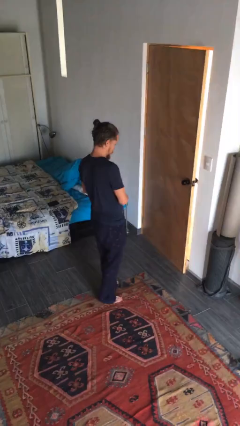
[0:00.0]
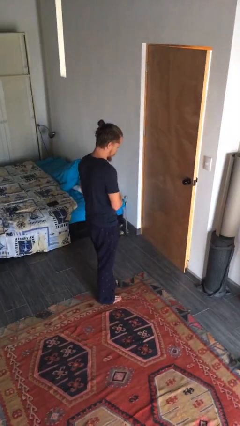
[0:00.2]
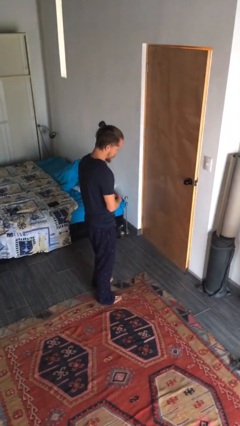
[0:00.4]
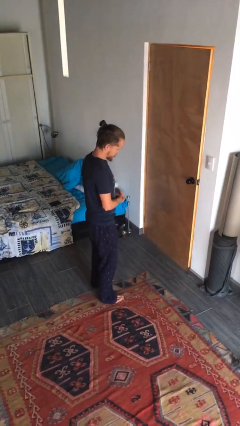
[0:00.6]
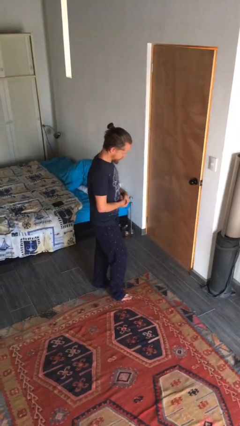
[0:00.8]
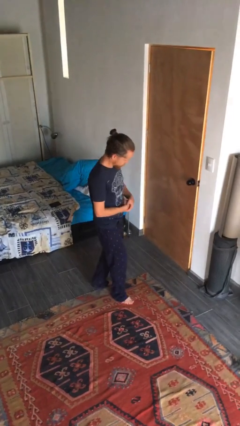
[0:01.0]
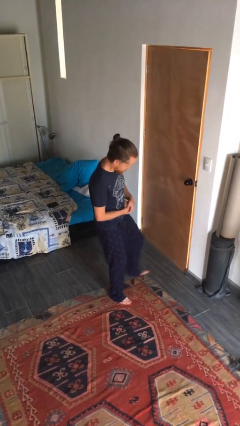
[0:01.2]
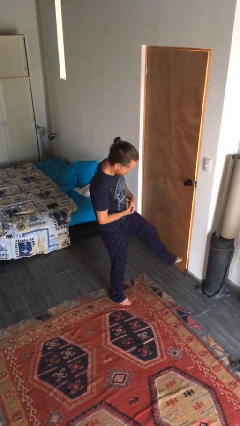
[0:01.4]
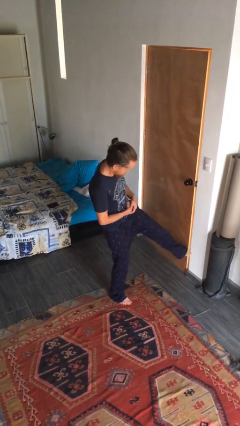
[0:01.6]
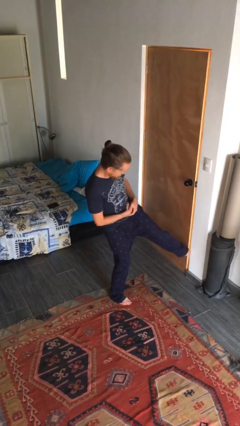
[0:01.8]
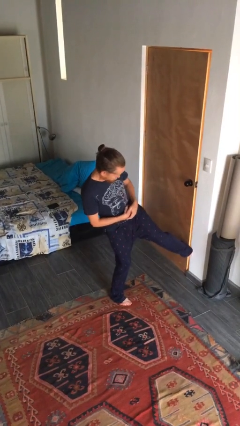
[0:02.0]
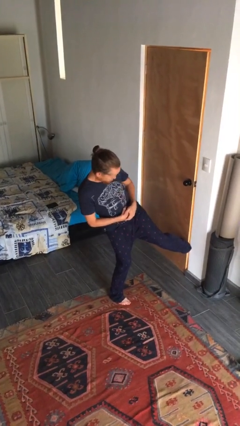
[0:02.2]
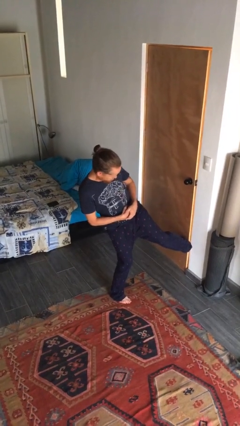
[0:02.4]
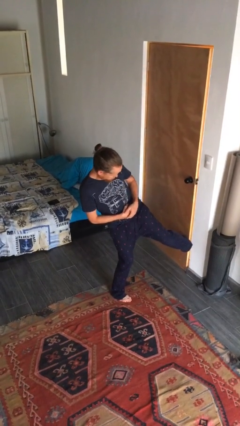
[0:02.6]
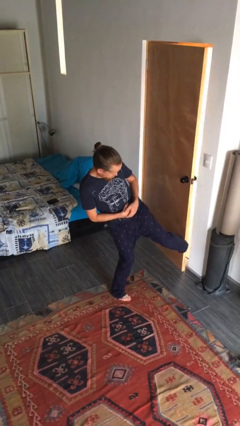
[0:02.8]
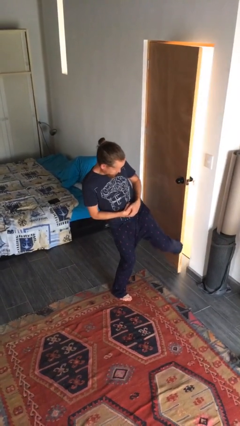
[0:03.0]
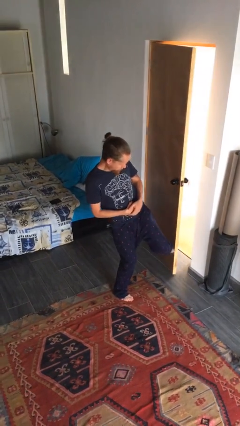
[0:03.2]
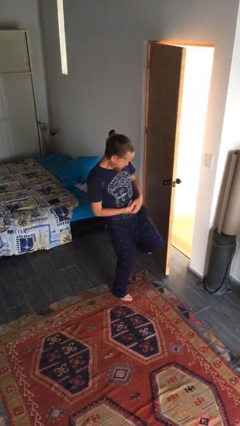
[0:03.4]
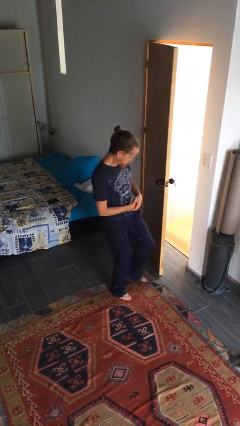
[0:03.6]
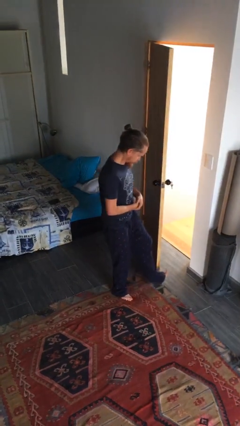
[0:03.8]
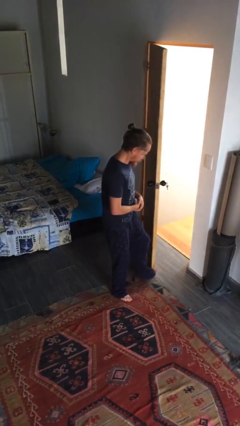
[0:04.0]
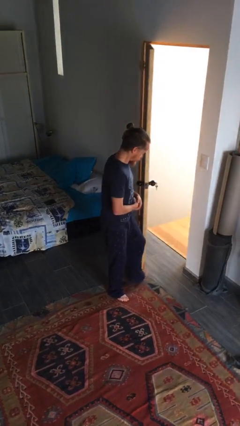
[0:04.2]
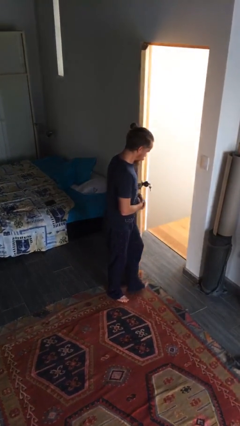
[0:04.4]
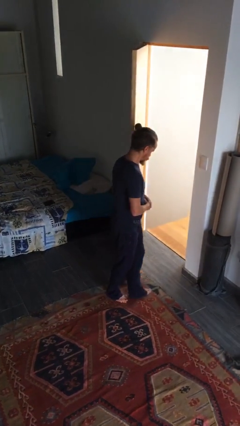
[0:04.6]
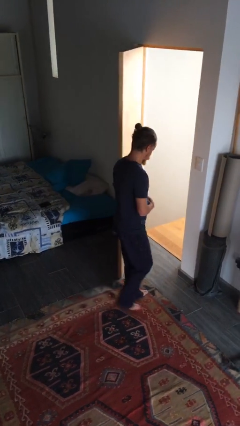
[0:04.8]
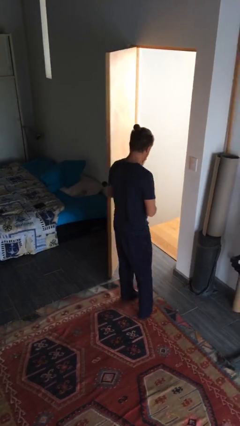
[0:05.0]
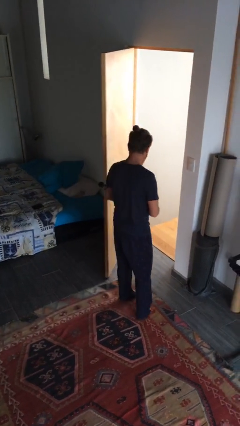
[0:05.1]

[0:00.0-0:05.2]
person opens facility door

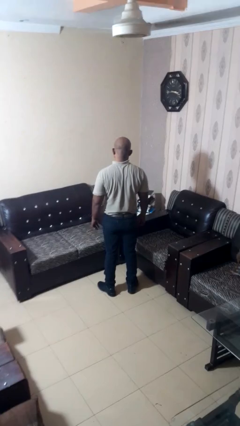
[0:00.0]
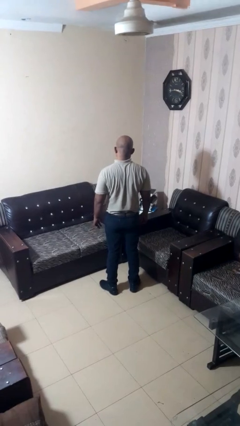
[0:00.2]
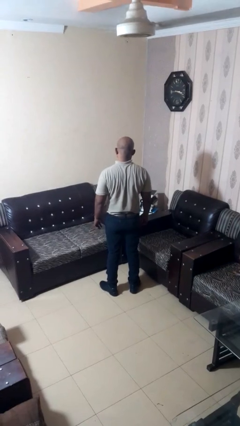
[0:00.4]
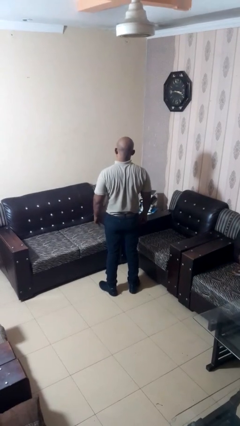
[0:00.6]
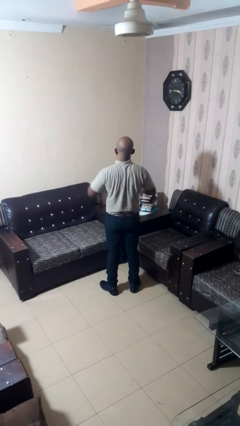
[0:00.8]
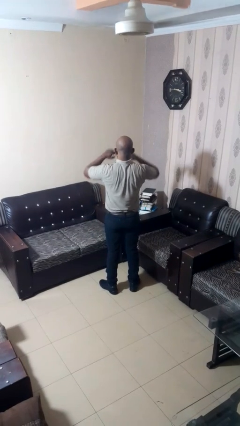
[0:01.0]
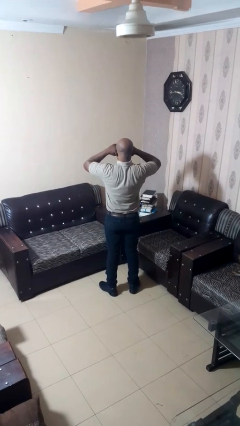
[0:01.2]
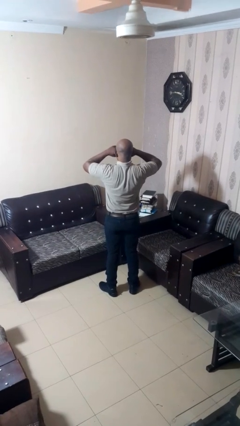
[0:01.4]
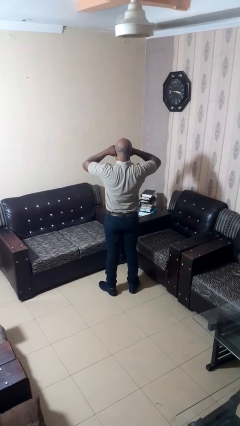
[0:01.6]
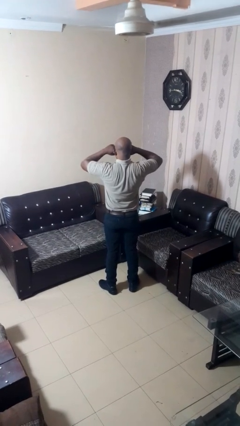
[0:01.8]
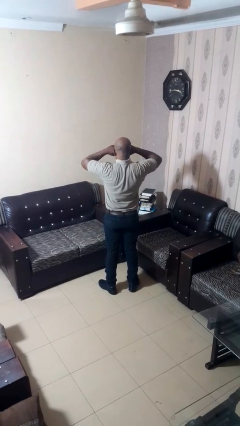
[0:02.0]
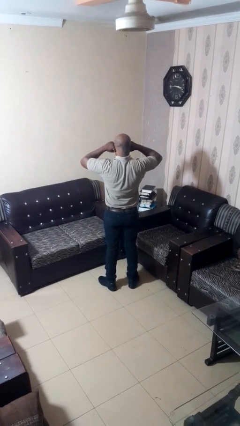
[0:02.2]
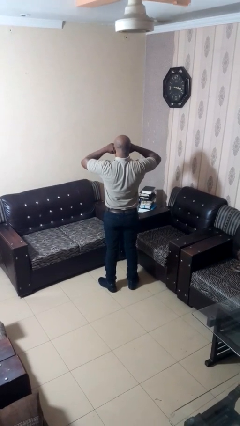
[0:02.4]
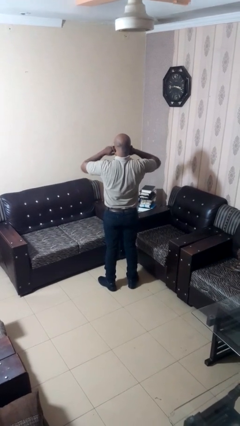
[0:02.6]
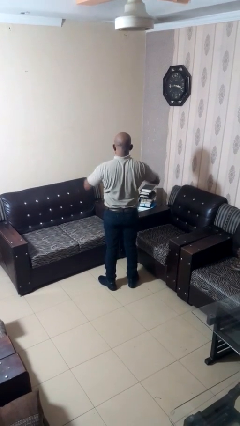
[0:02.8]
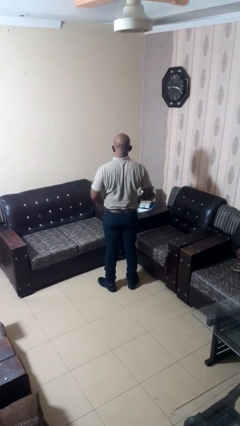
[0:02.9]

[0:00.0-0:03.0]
person rubs eyes

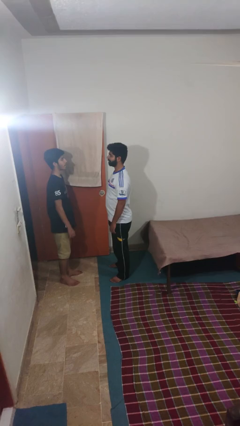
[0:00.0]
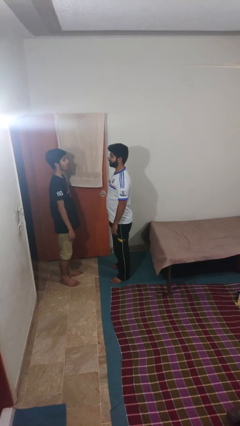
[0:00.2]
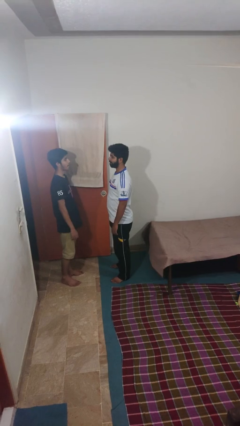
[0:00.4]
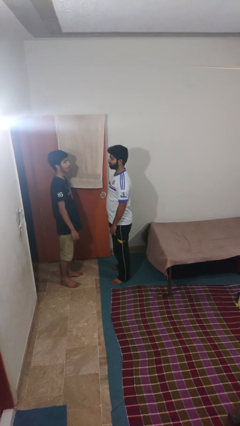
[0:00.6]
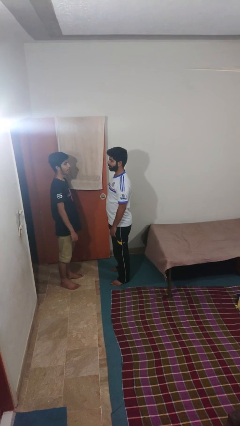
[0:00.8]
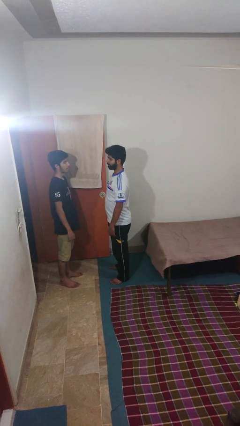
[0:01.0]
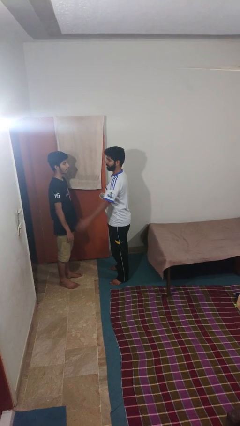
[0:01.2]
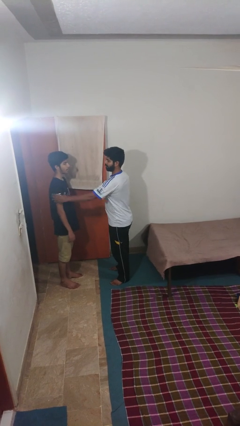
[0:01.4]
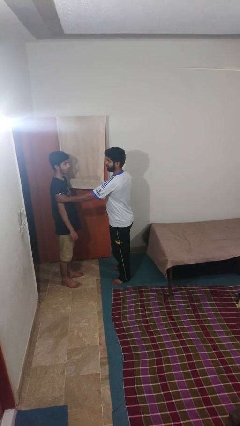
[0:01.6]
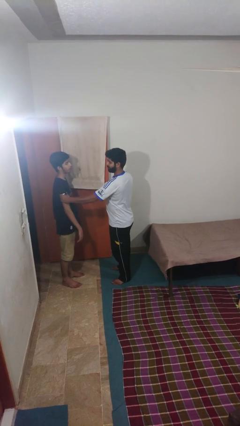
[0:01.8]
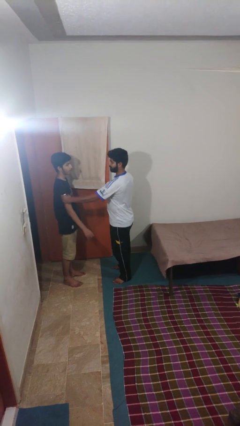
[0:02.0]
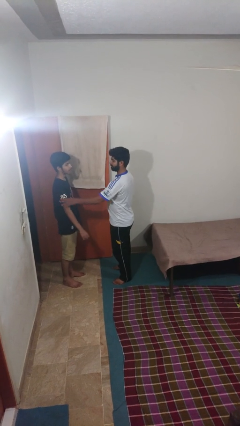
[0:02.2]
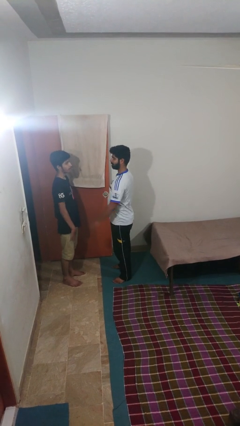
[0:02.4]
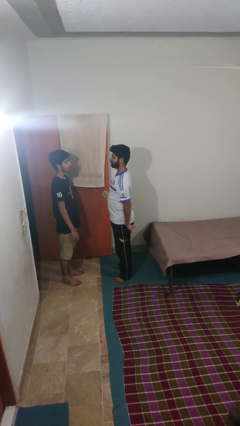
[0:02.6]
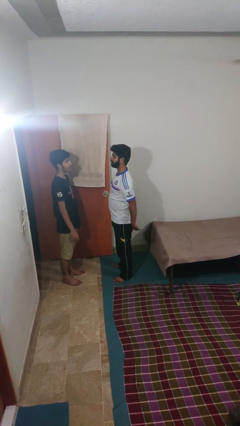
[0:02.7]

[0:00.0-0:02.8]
person grabs person by bicep

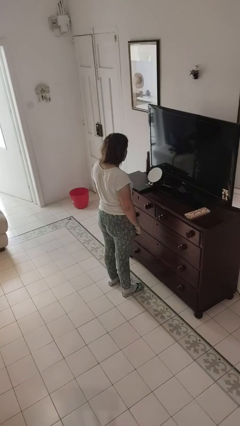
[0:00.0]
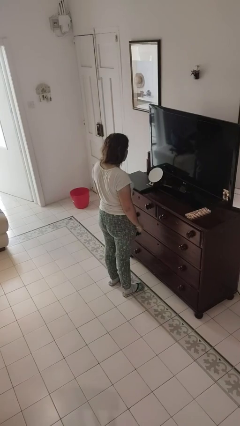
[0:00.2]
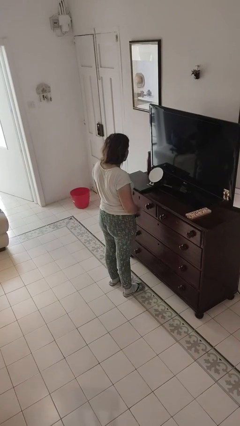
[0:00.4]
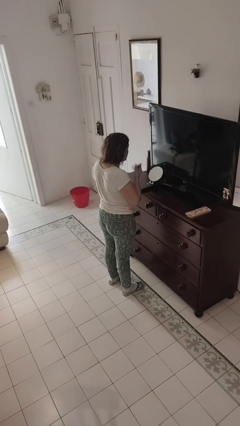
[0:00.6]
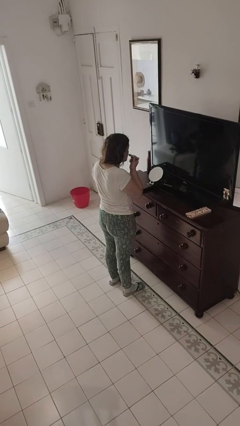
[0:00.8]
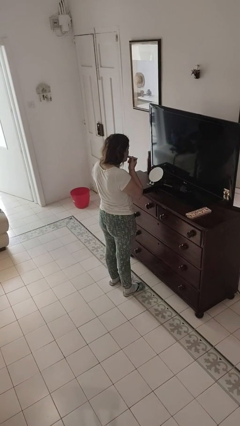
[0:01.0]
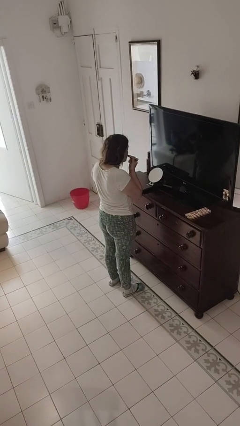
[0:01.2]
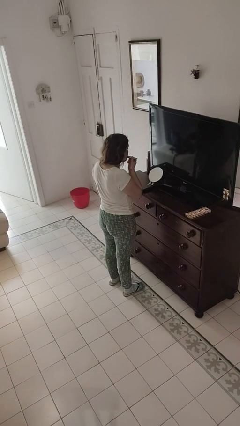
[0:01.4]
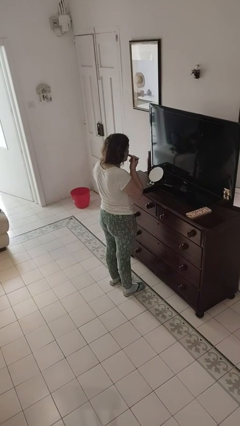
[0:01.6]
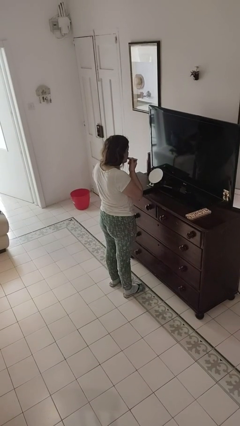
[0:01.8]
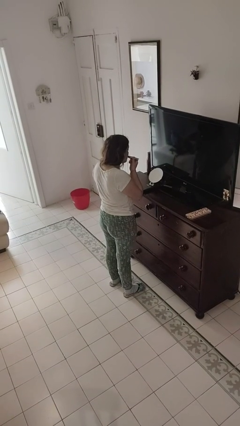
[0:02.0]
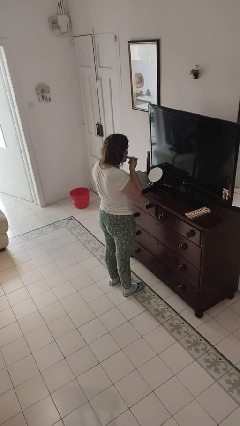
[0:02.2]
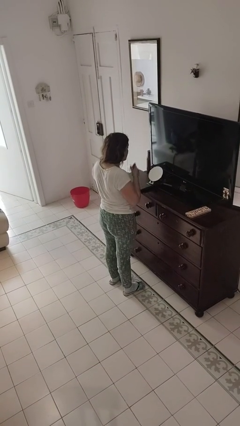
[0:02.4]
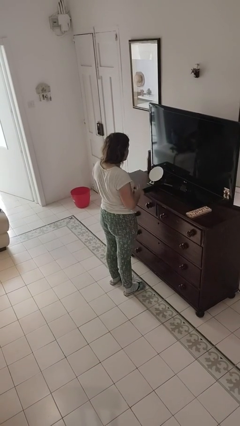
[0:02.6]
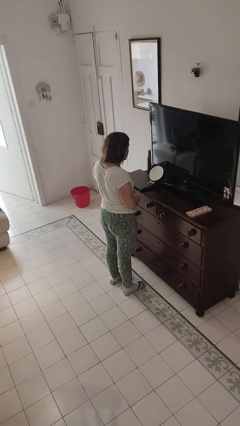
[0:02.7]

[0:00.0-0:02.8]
person applies lip makeup

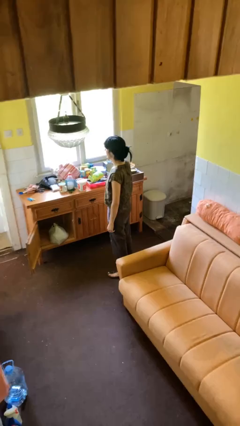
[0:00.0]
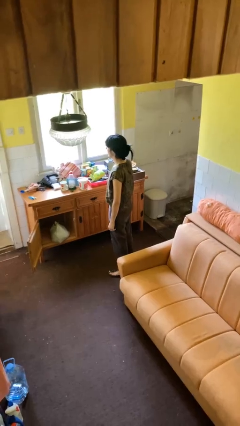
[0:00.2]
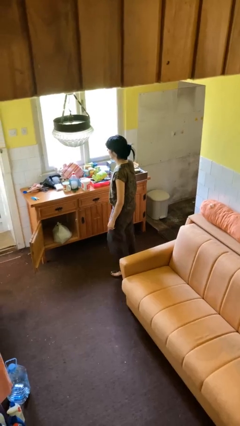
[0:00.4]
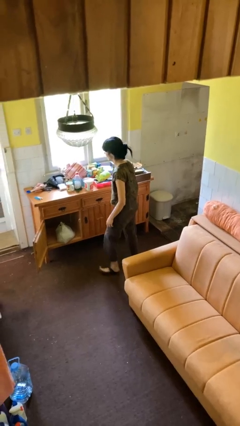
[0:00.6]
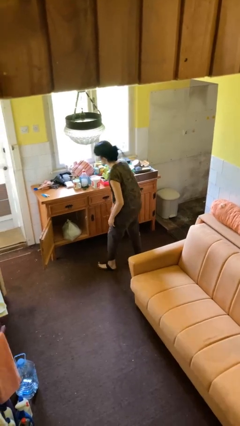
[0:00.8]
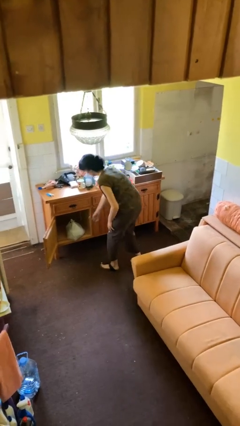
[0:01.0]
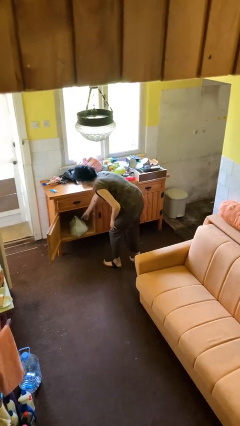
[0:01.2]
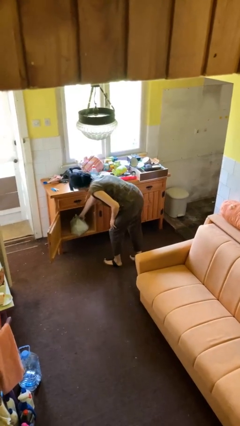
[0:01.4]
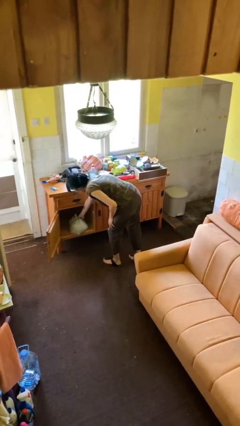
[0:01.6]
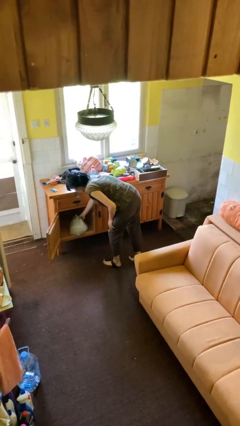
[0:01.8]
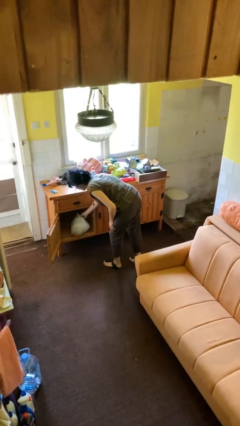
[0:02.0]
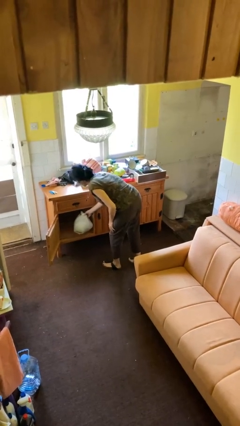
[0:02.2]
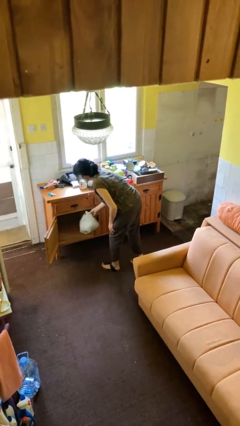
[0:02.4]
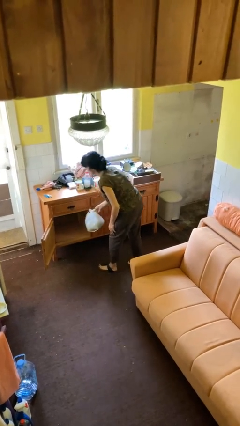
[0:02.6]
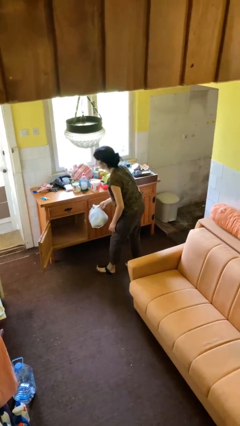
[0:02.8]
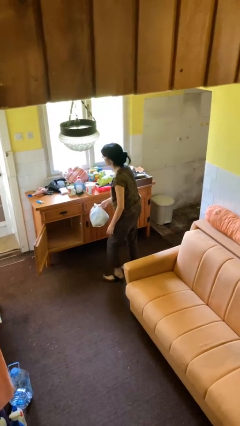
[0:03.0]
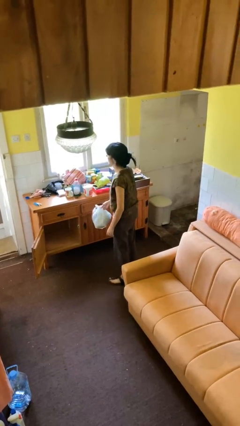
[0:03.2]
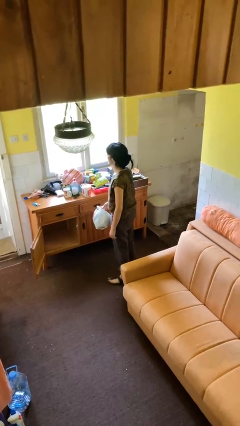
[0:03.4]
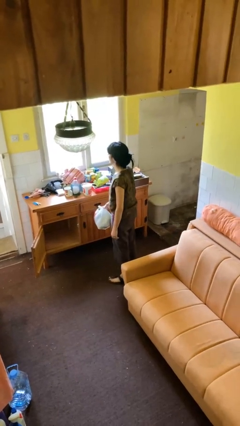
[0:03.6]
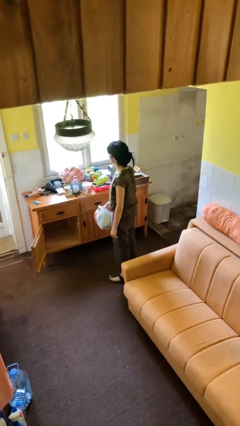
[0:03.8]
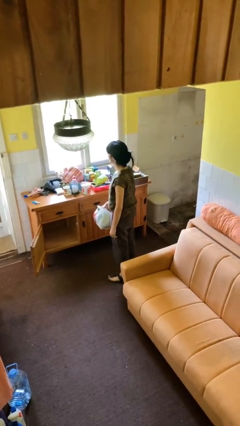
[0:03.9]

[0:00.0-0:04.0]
person picks up object from cabinet
